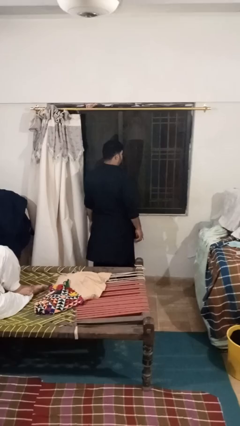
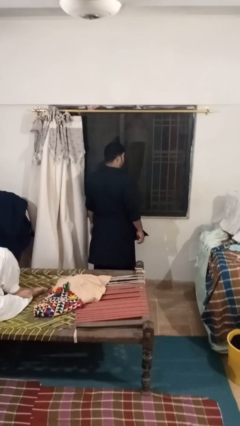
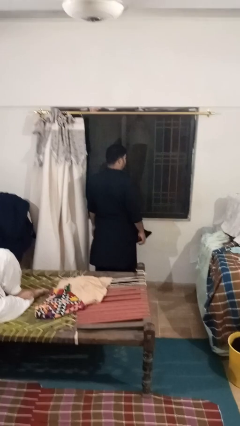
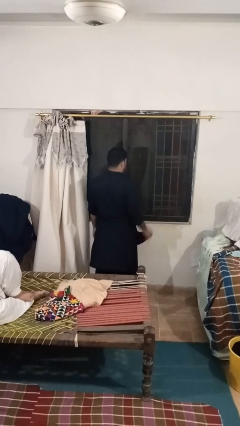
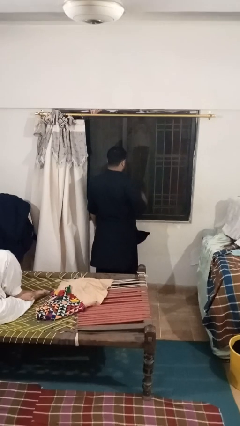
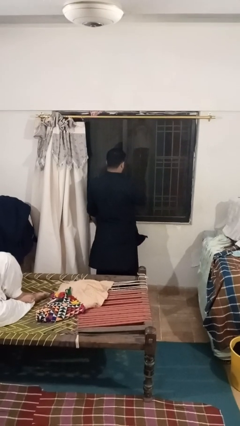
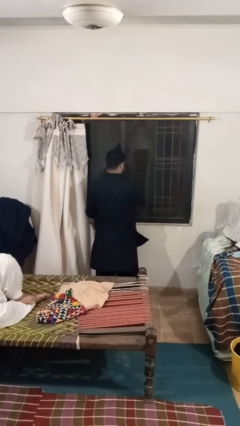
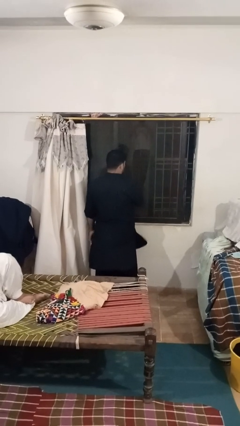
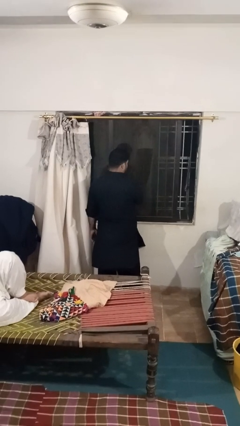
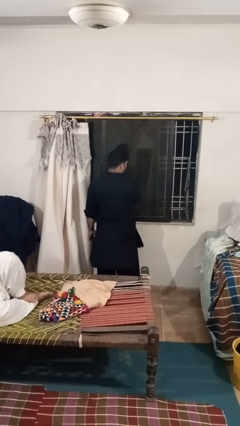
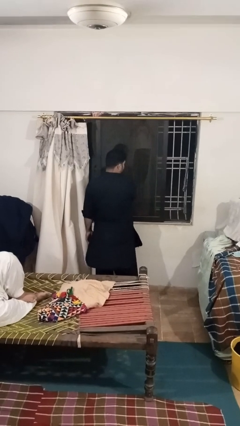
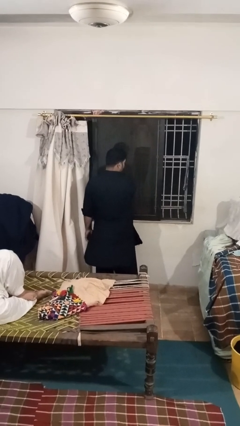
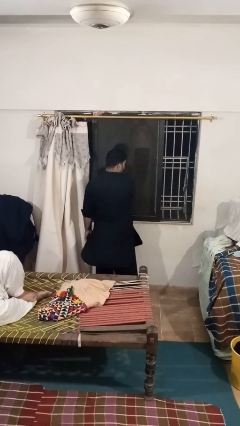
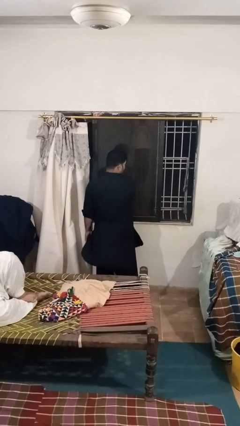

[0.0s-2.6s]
person opens sliding door

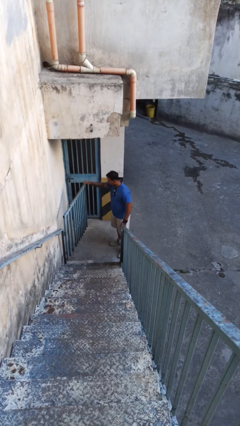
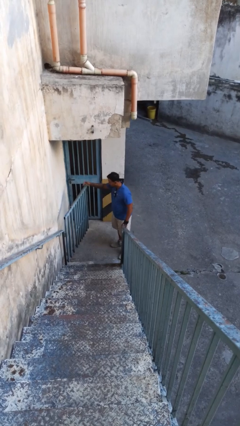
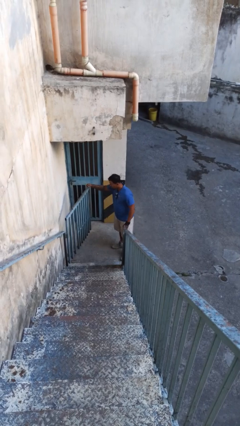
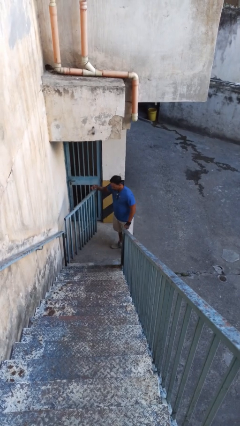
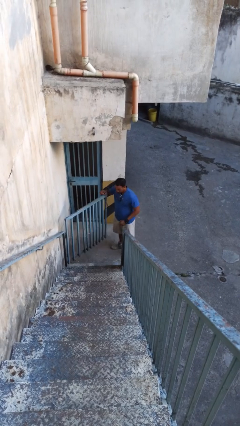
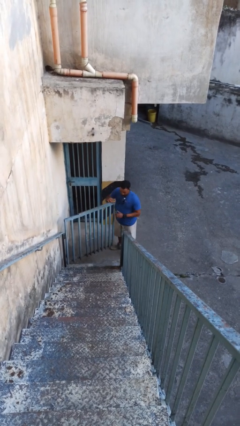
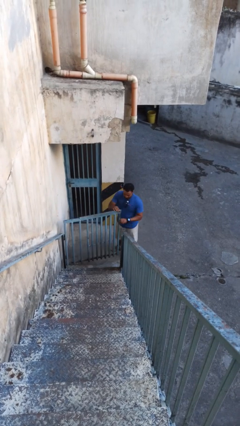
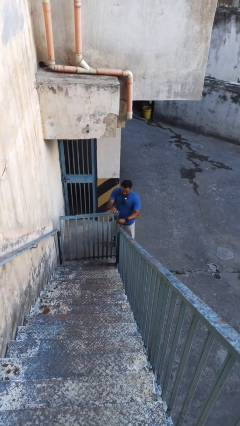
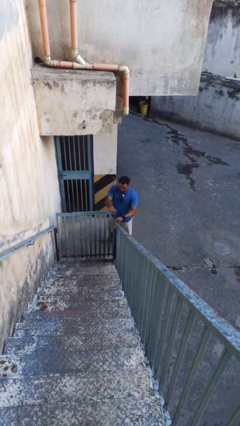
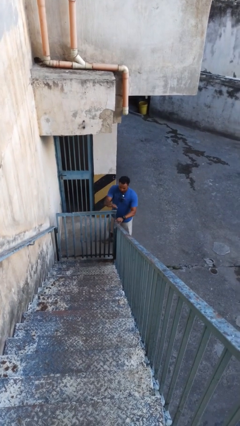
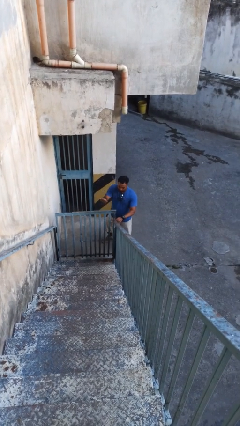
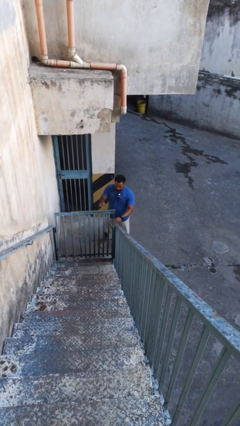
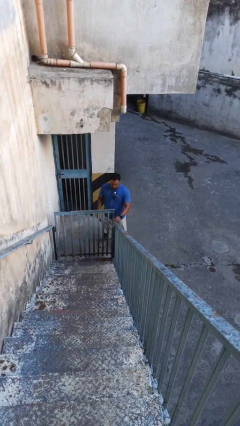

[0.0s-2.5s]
person closes facility door

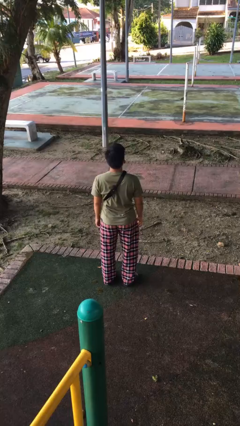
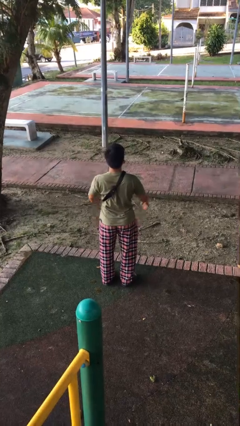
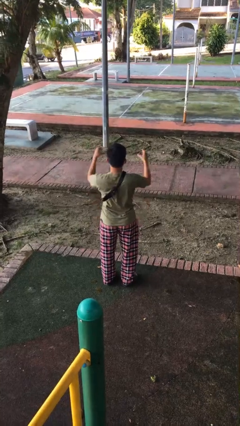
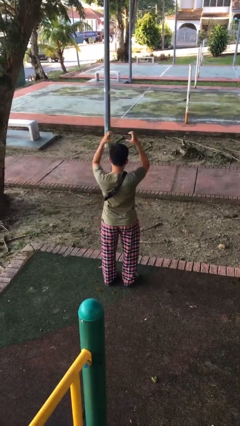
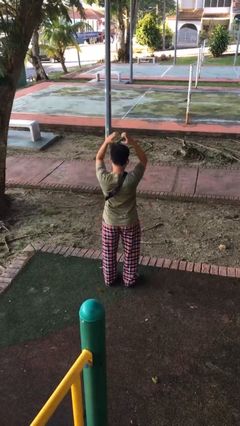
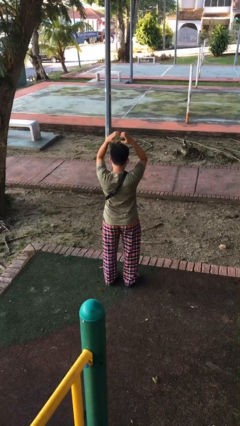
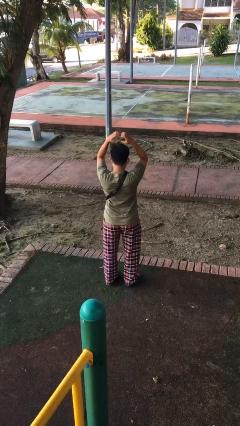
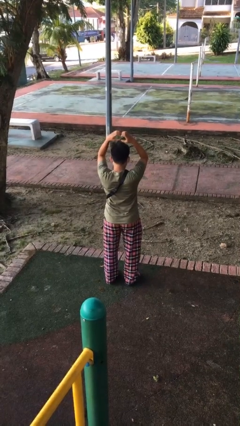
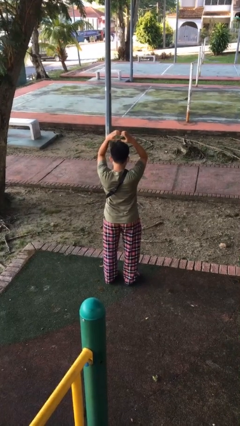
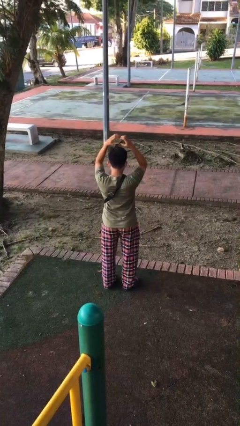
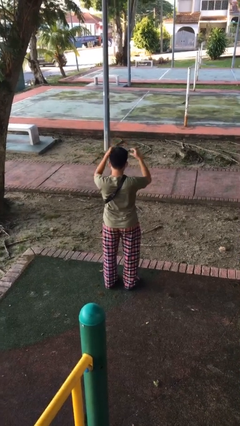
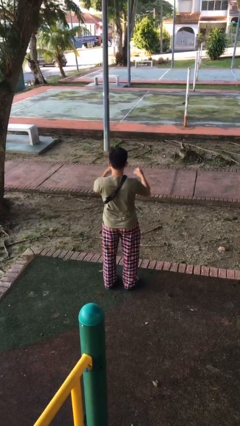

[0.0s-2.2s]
person gestures heart

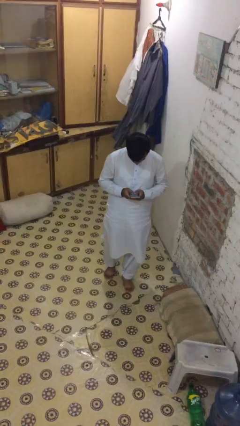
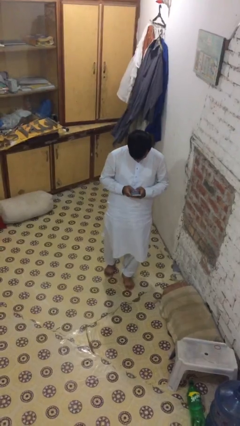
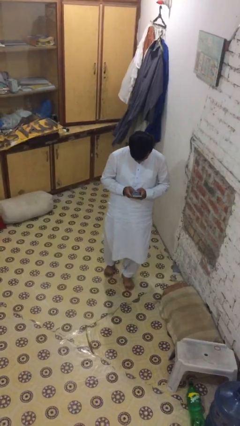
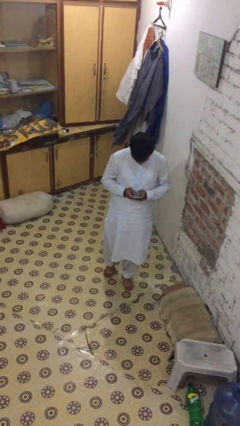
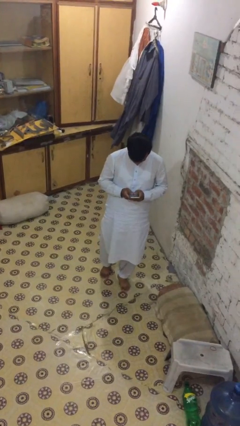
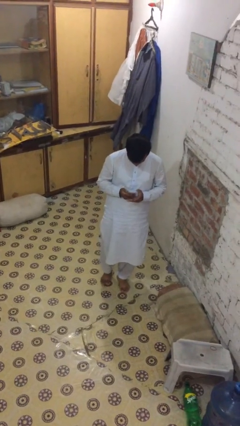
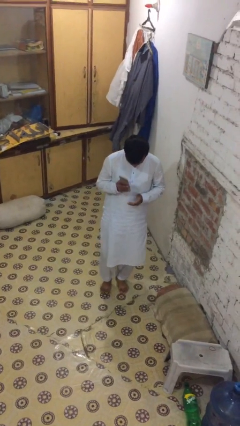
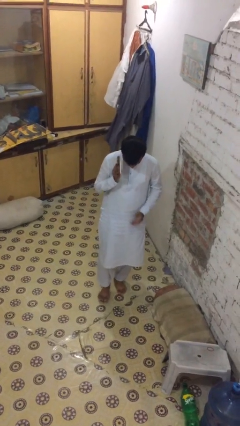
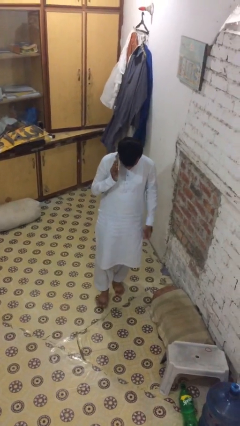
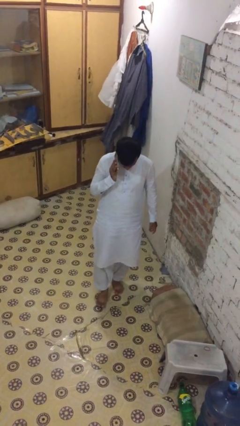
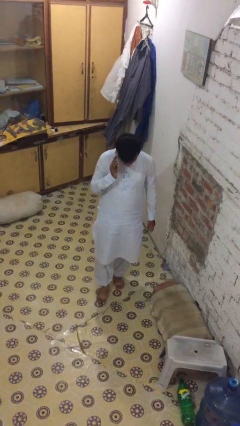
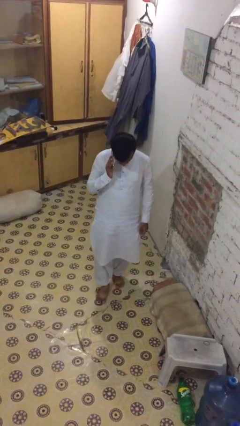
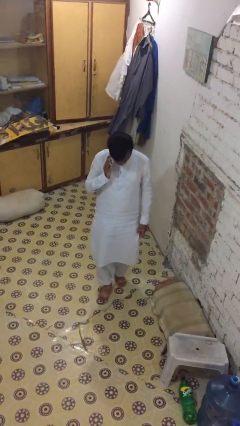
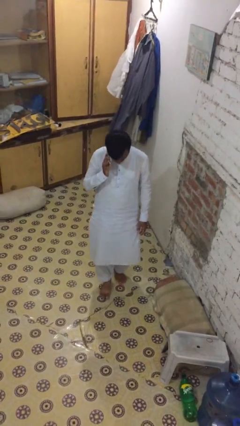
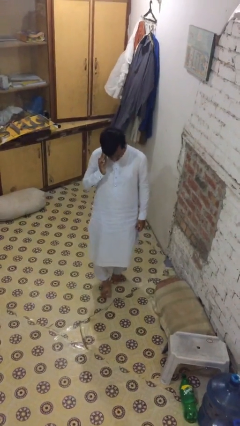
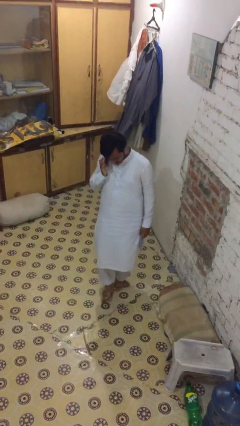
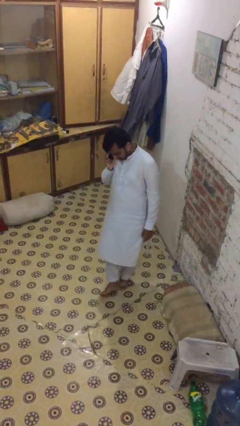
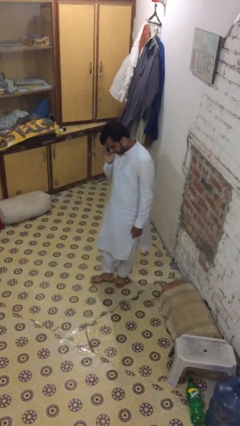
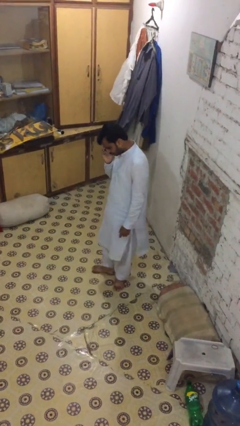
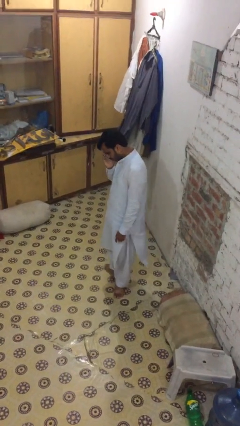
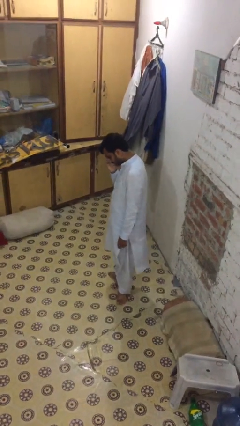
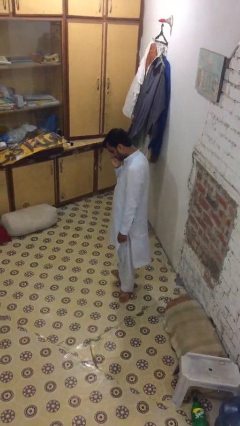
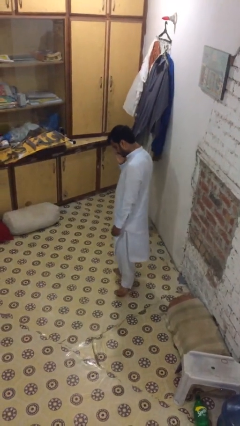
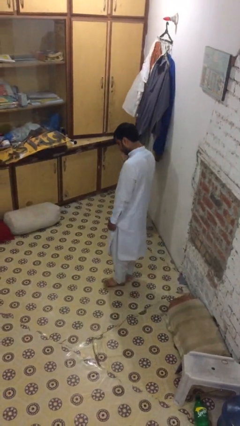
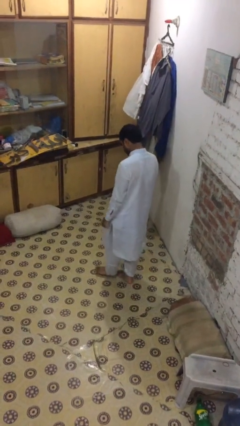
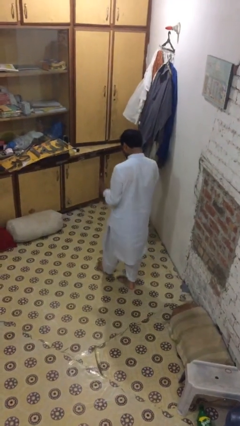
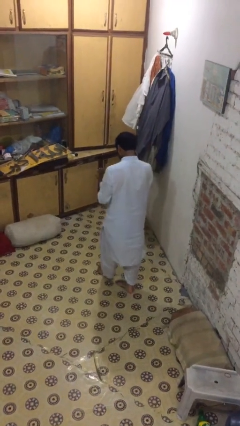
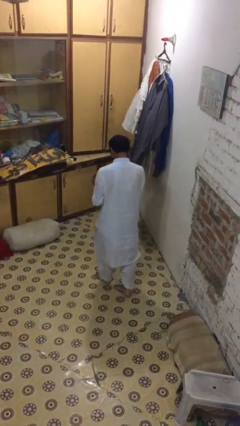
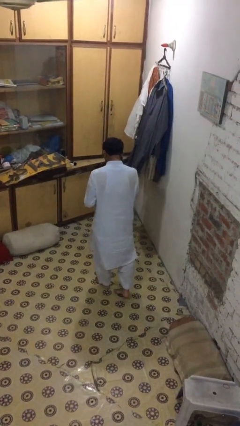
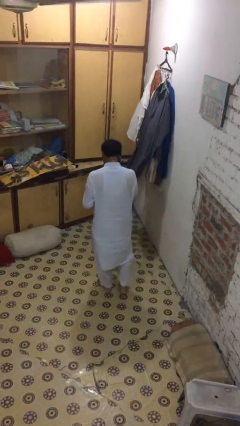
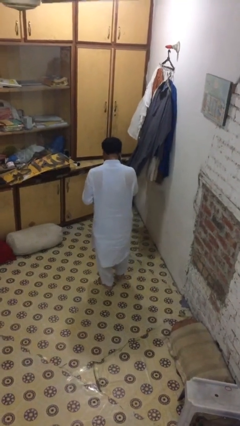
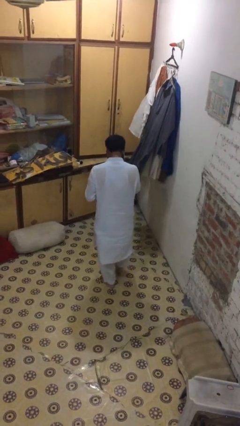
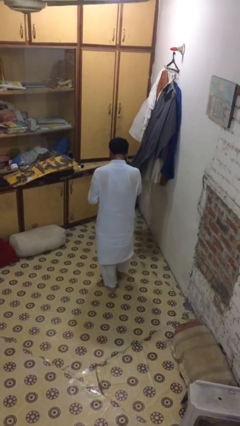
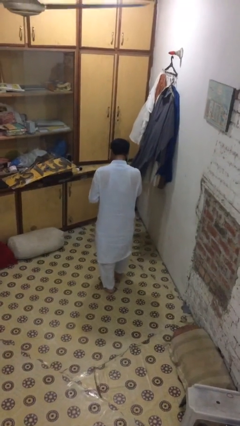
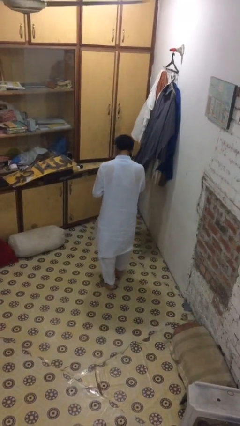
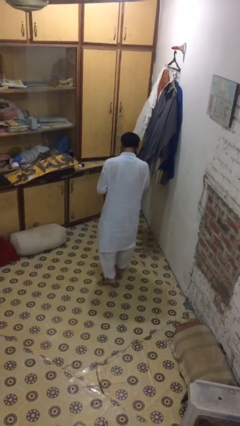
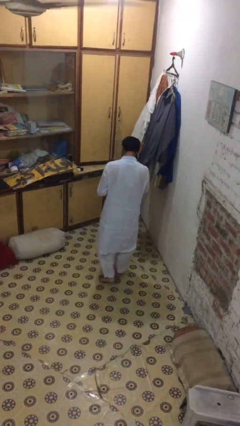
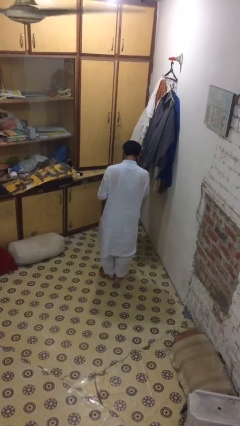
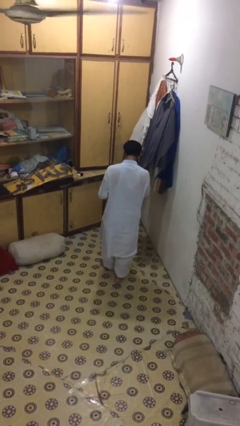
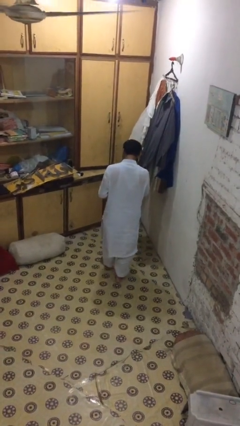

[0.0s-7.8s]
person talks on phone

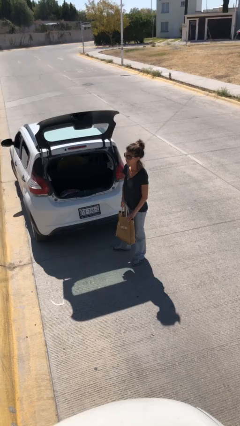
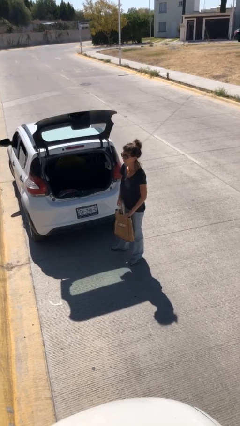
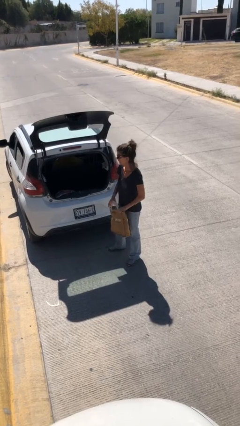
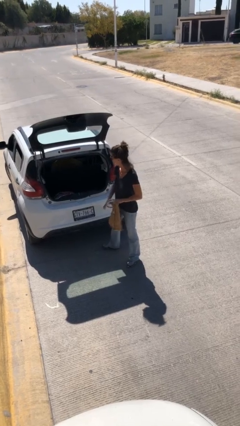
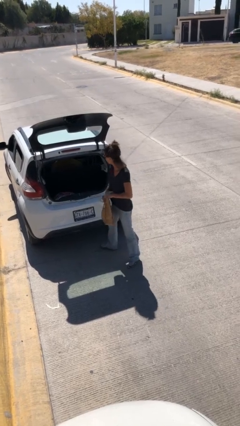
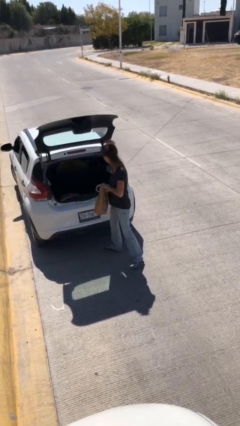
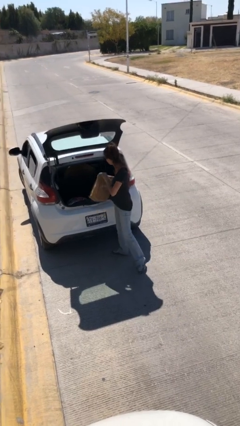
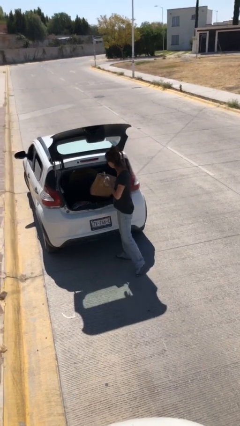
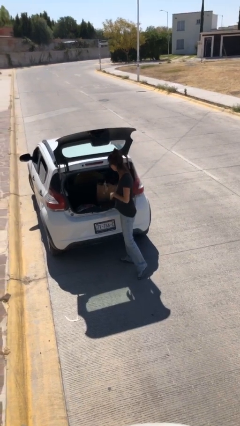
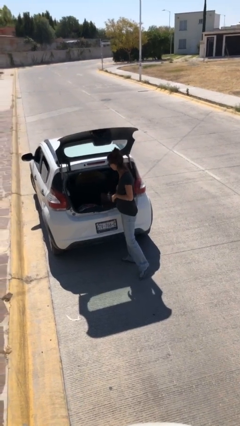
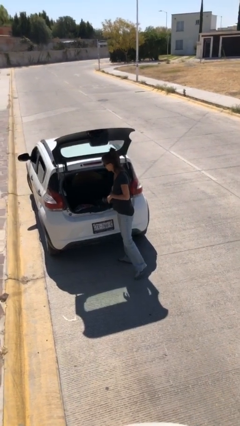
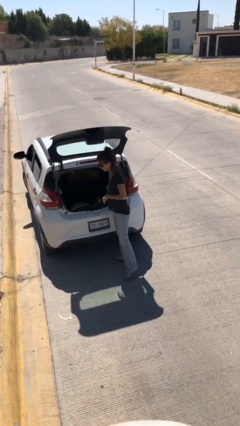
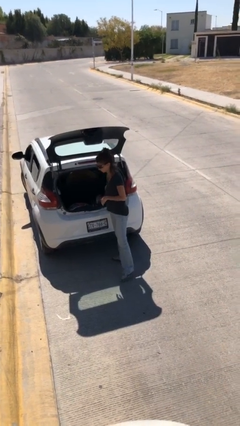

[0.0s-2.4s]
person loads car

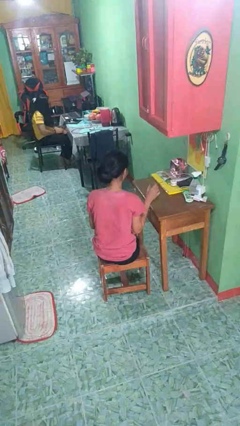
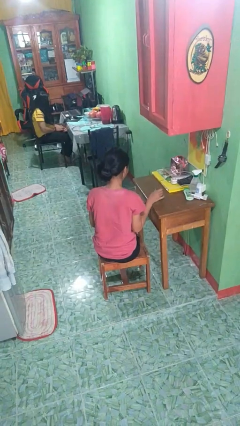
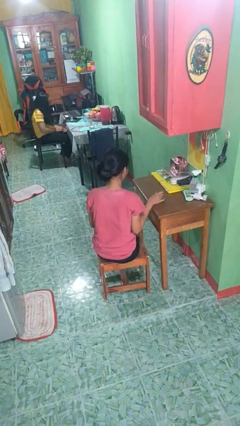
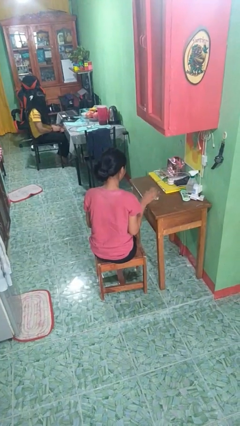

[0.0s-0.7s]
person puts down object on table
